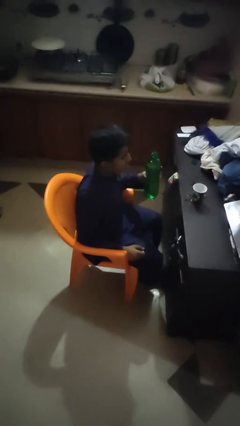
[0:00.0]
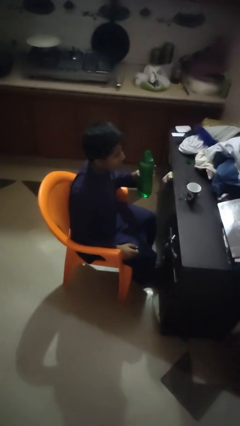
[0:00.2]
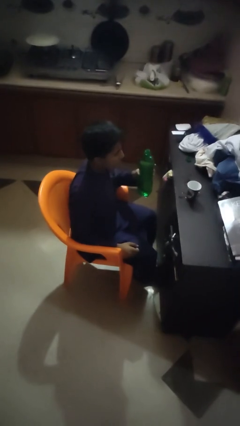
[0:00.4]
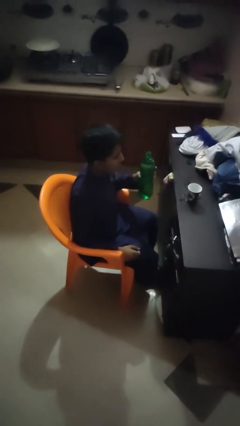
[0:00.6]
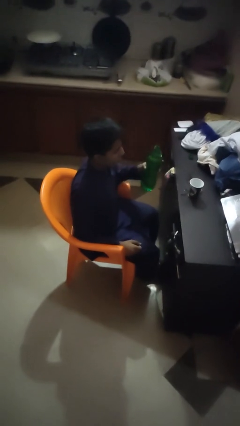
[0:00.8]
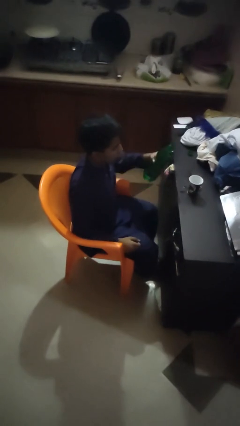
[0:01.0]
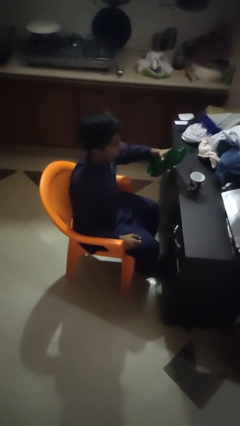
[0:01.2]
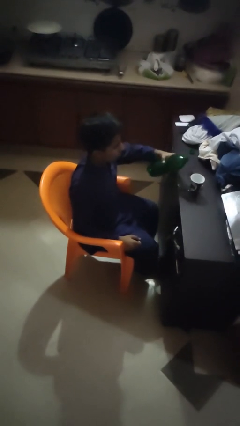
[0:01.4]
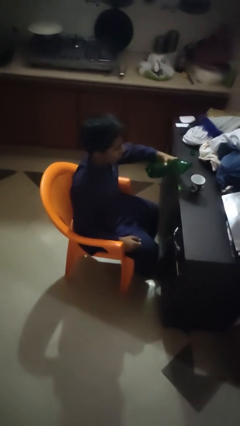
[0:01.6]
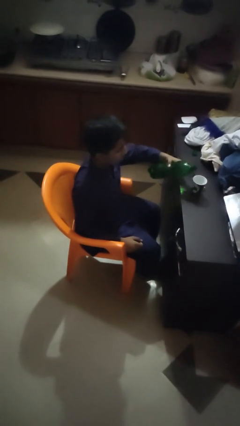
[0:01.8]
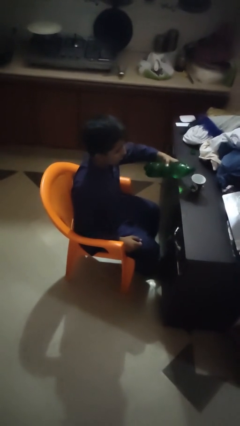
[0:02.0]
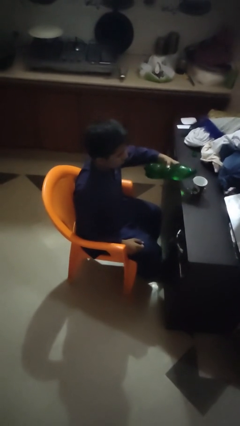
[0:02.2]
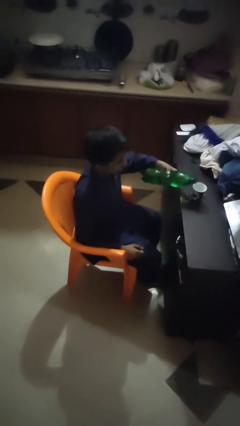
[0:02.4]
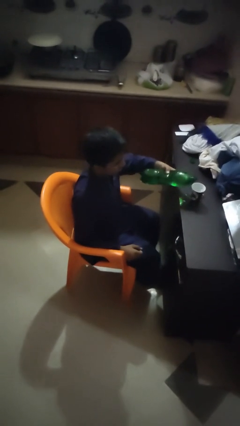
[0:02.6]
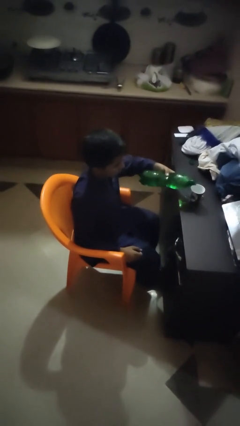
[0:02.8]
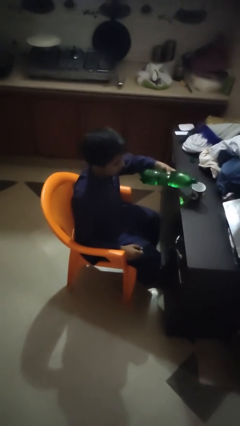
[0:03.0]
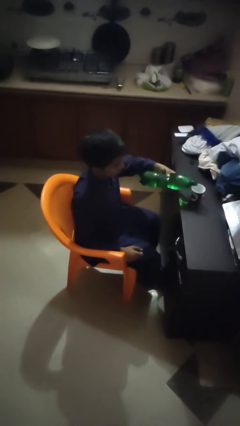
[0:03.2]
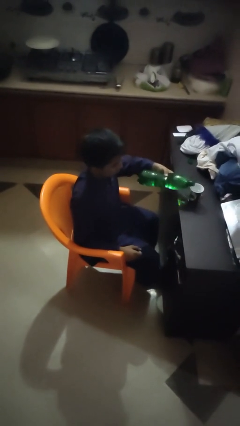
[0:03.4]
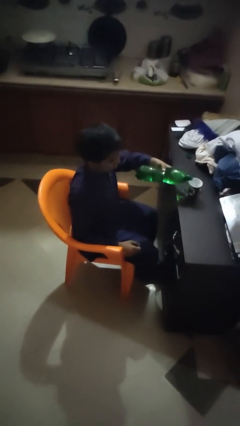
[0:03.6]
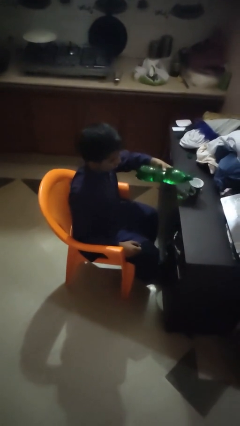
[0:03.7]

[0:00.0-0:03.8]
person pours liquid into cup

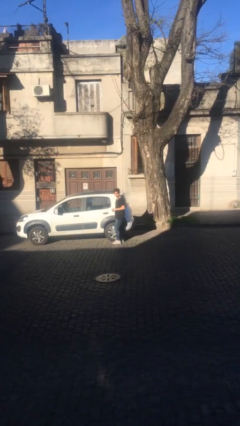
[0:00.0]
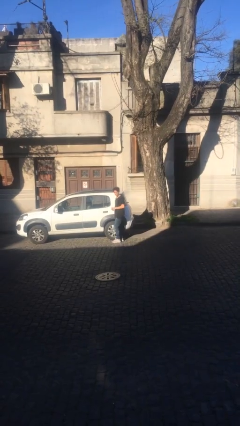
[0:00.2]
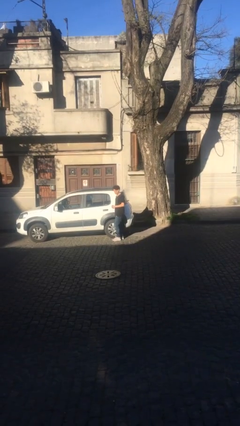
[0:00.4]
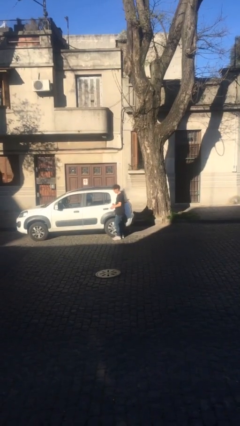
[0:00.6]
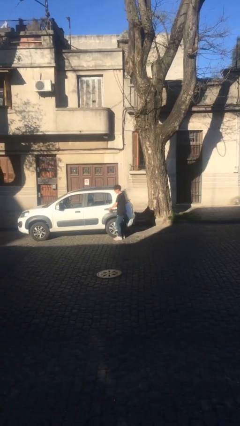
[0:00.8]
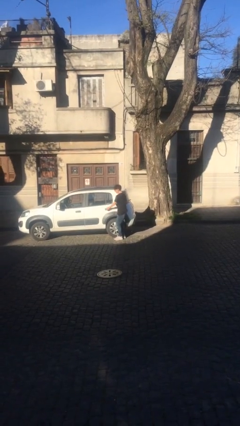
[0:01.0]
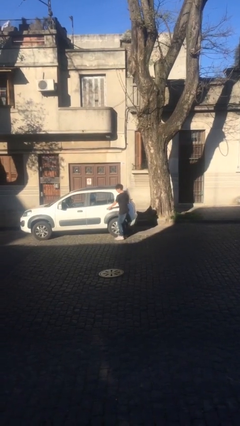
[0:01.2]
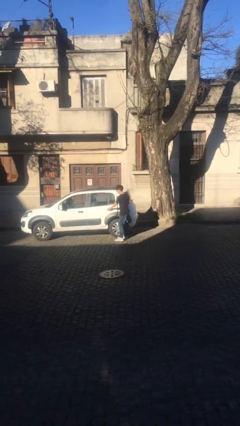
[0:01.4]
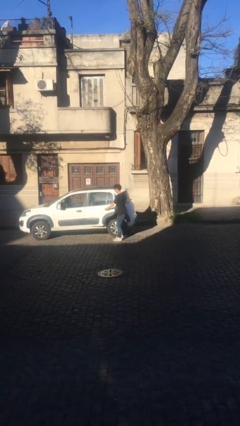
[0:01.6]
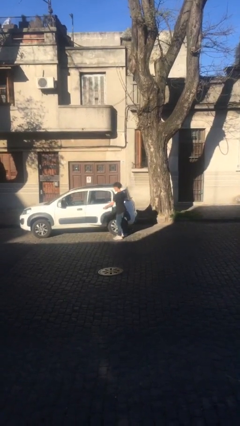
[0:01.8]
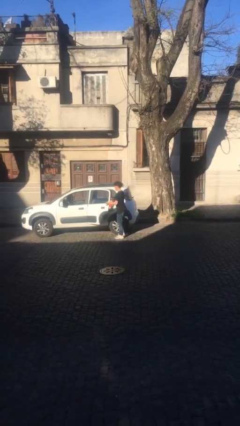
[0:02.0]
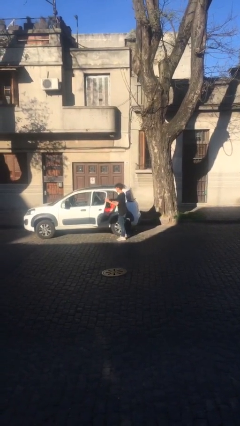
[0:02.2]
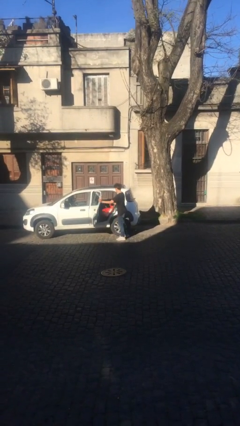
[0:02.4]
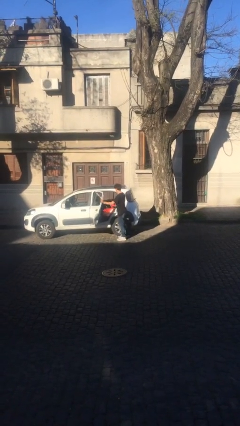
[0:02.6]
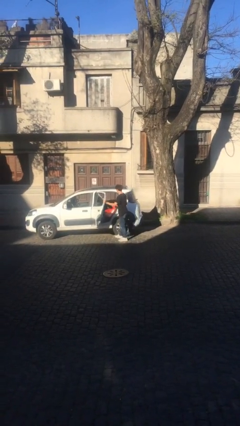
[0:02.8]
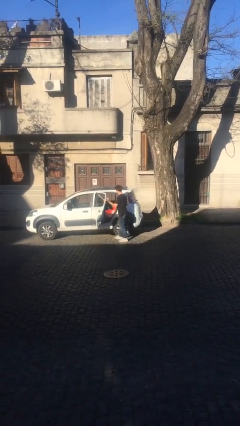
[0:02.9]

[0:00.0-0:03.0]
person opens car door

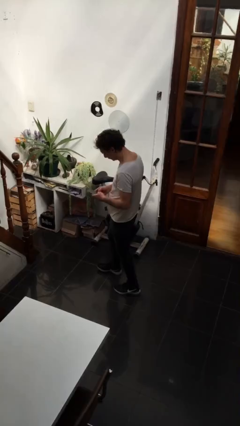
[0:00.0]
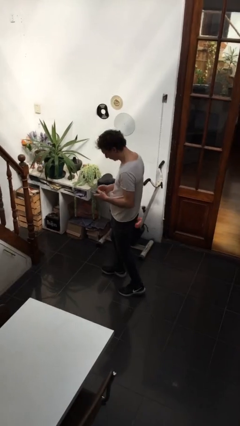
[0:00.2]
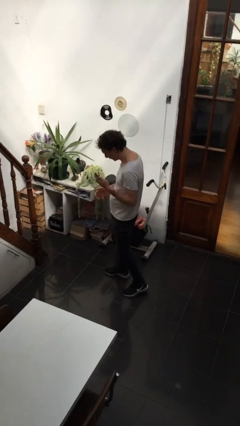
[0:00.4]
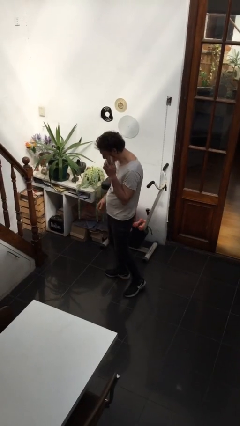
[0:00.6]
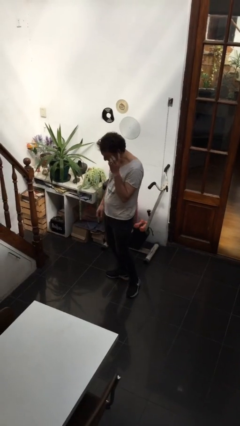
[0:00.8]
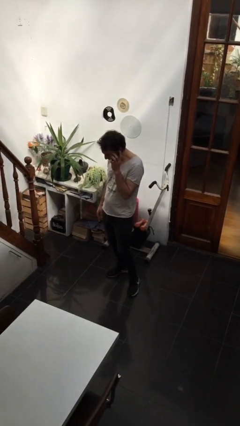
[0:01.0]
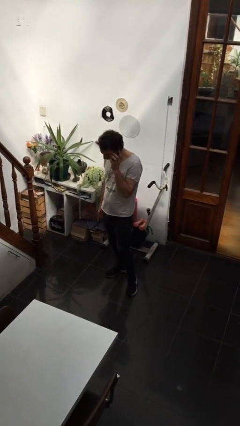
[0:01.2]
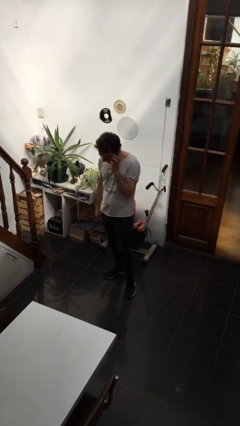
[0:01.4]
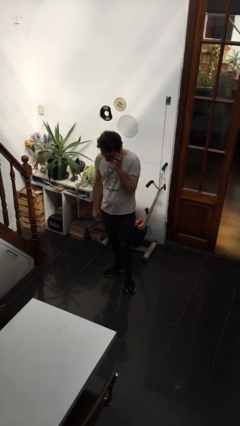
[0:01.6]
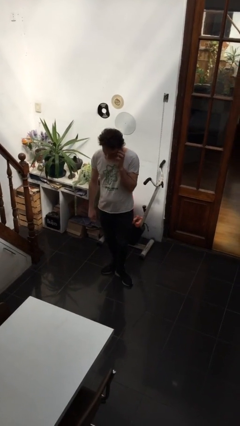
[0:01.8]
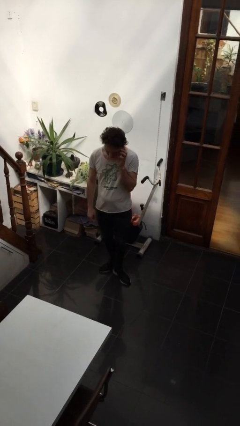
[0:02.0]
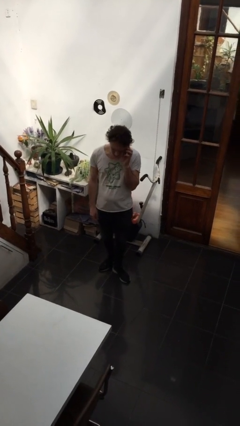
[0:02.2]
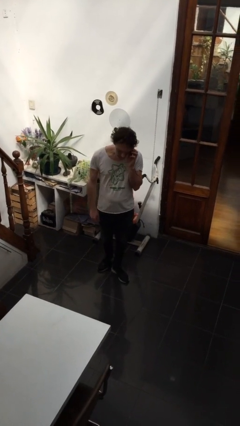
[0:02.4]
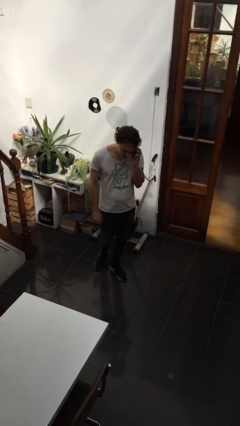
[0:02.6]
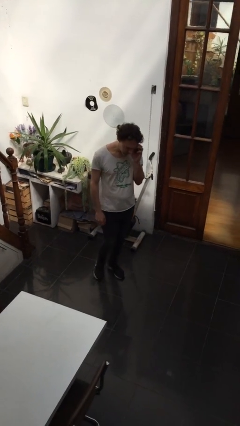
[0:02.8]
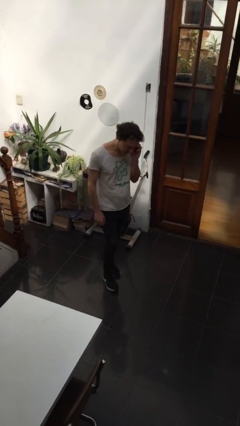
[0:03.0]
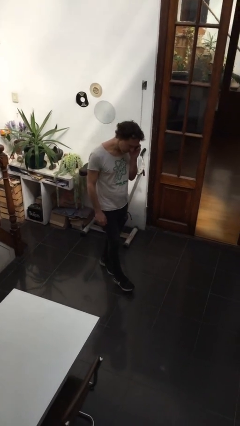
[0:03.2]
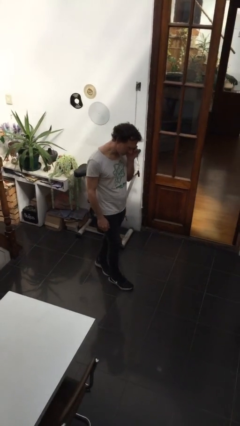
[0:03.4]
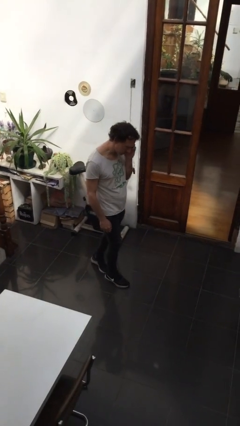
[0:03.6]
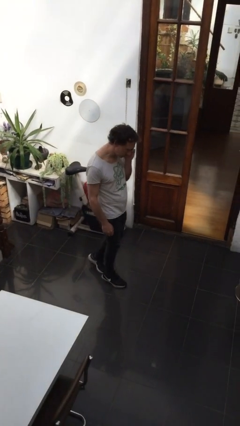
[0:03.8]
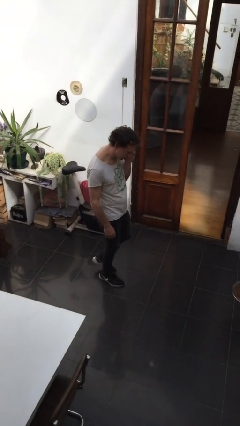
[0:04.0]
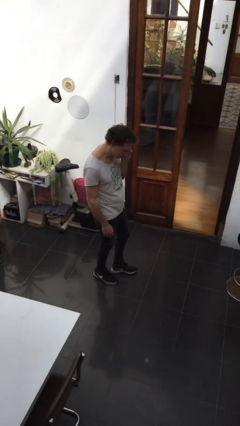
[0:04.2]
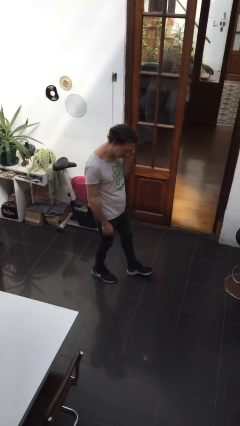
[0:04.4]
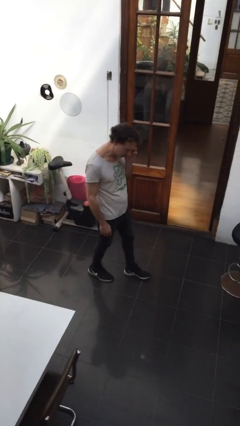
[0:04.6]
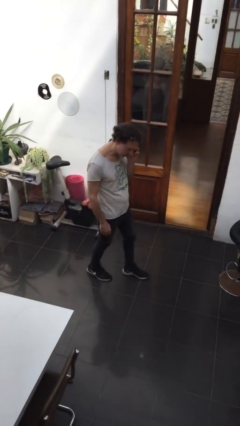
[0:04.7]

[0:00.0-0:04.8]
person talks on phone

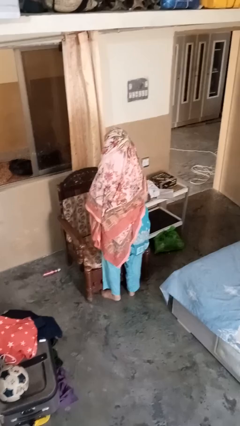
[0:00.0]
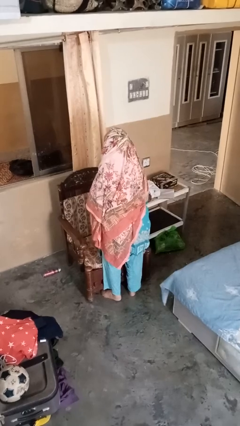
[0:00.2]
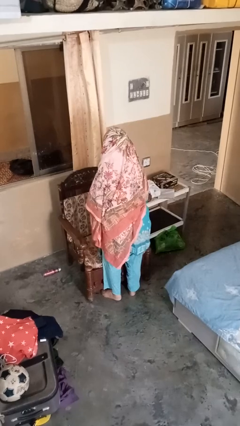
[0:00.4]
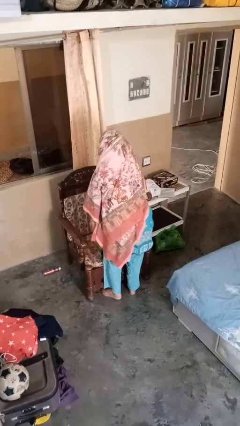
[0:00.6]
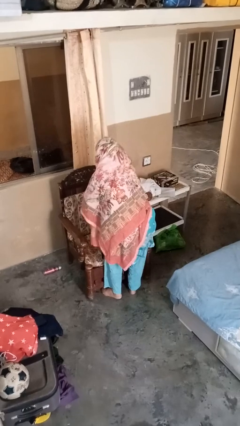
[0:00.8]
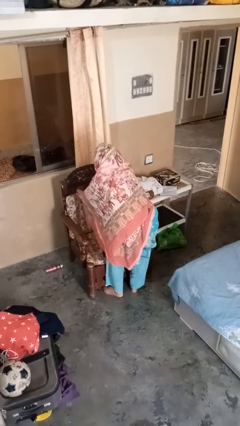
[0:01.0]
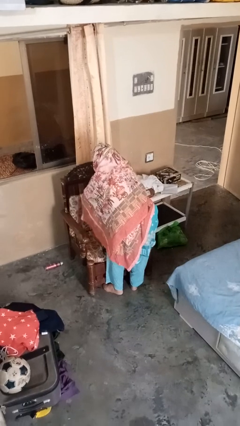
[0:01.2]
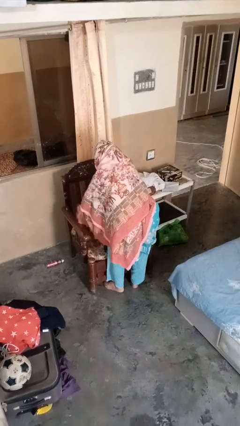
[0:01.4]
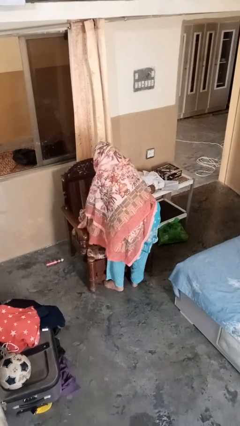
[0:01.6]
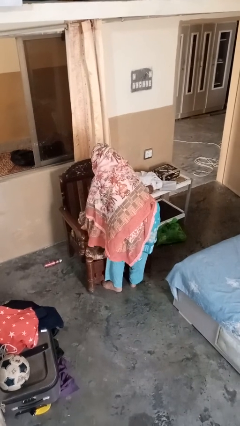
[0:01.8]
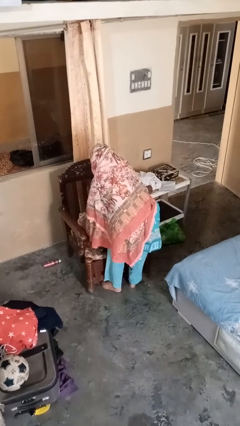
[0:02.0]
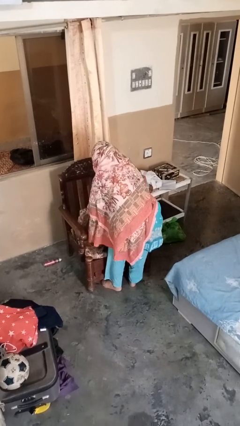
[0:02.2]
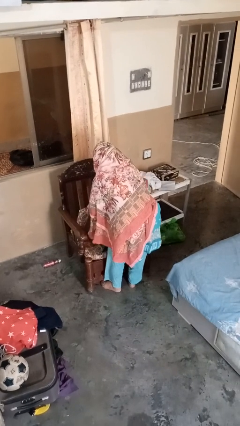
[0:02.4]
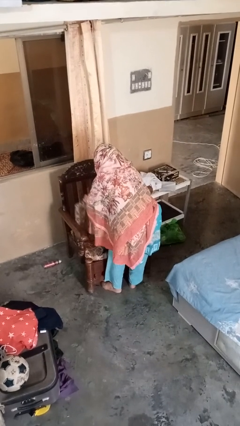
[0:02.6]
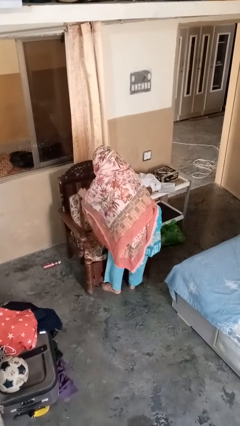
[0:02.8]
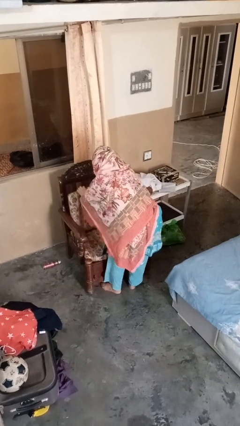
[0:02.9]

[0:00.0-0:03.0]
person searches in couch

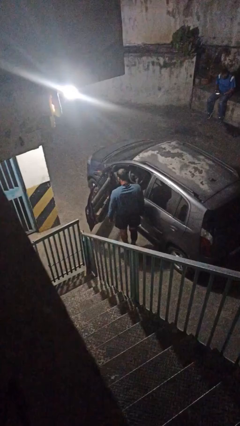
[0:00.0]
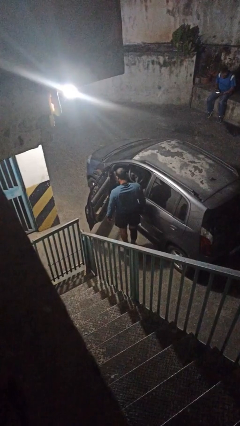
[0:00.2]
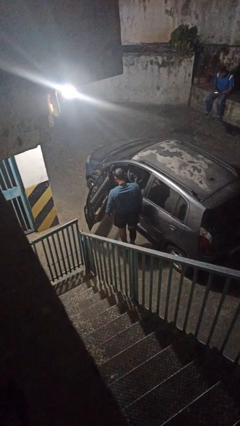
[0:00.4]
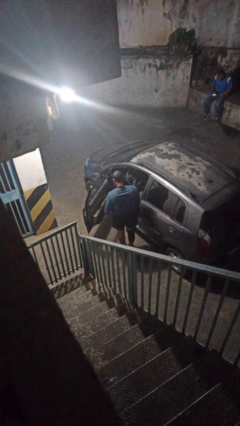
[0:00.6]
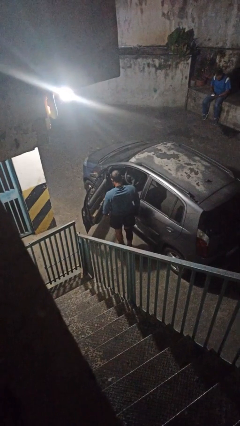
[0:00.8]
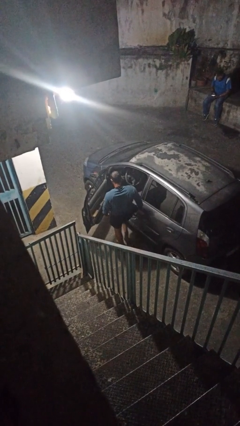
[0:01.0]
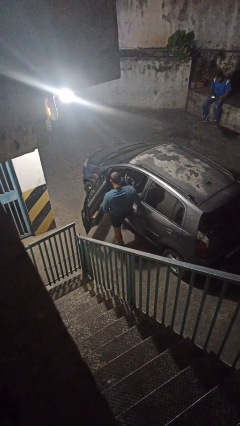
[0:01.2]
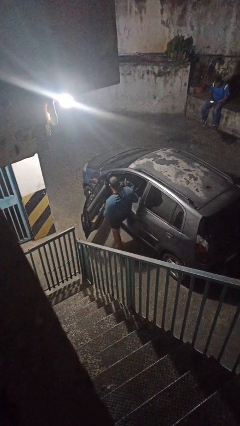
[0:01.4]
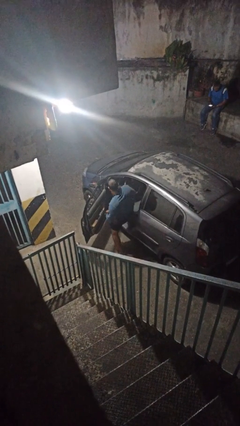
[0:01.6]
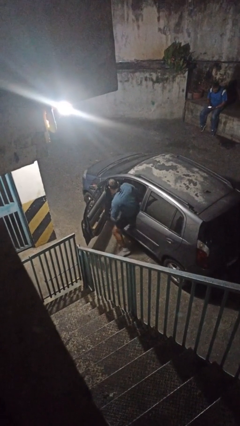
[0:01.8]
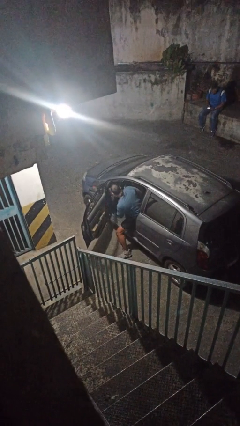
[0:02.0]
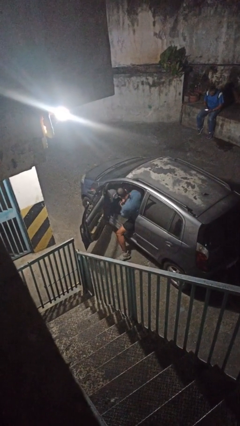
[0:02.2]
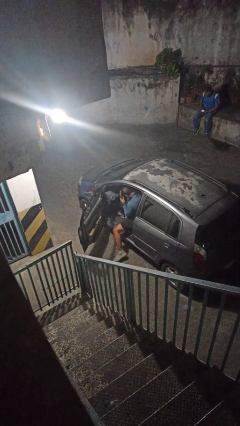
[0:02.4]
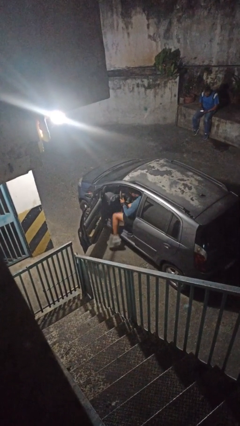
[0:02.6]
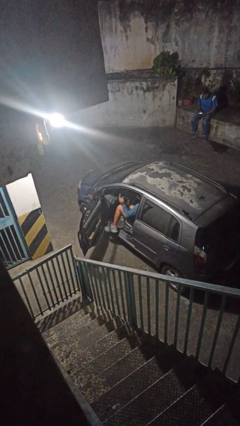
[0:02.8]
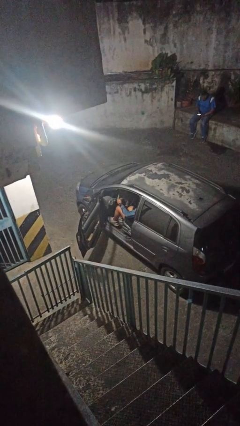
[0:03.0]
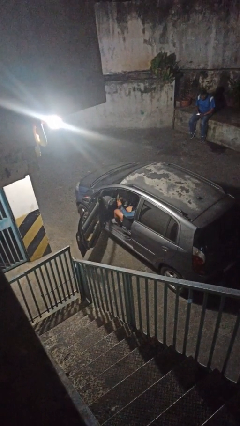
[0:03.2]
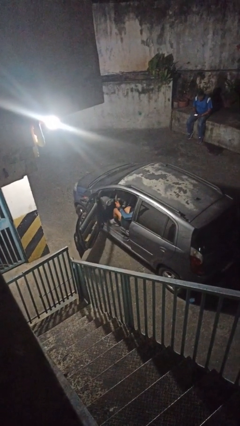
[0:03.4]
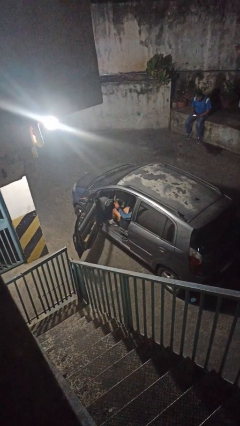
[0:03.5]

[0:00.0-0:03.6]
person enters car
